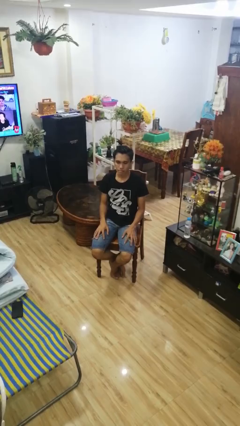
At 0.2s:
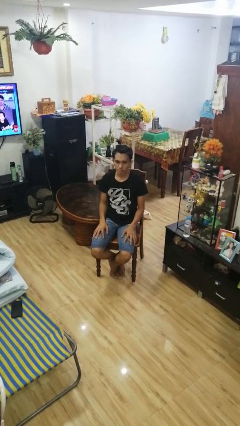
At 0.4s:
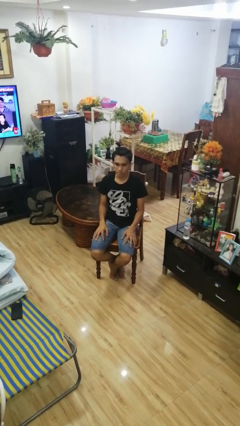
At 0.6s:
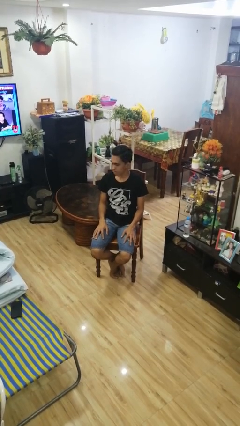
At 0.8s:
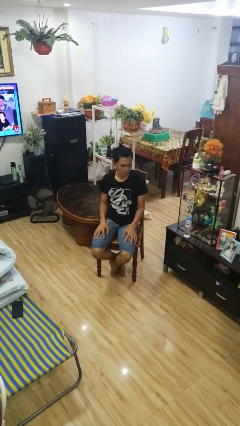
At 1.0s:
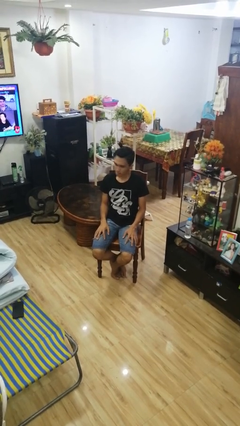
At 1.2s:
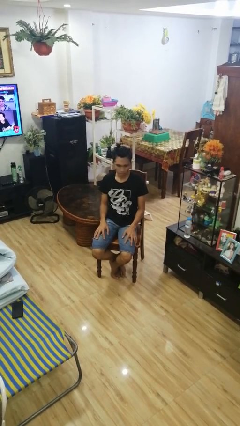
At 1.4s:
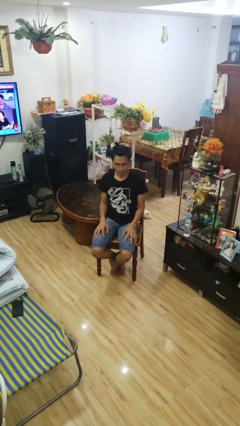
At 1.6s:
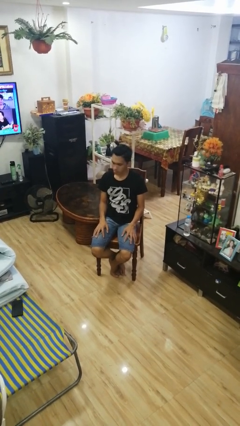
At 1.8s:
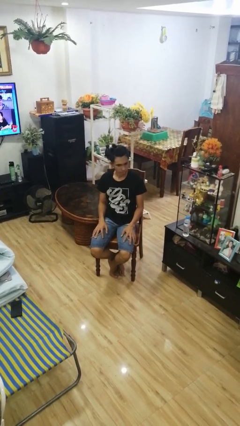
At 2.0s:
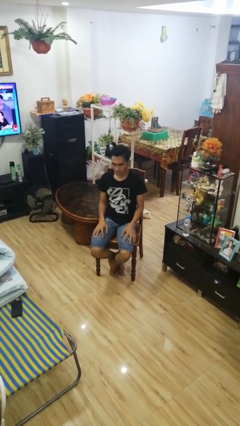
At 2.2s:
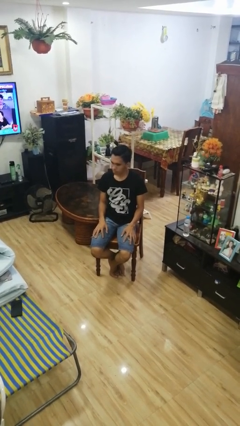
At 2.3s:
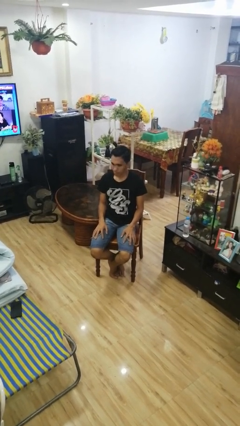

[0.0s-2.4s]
person shakes head

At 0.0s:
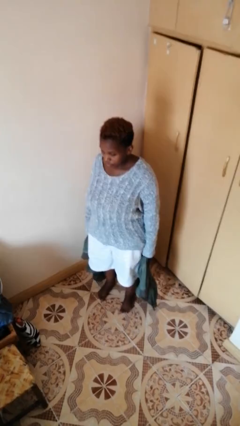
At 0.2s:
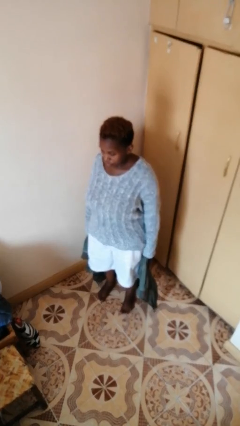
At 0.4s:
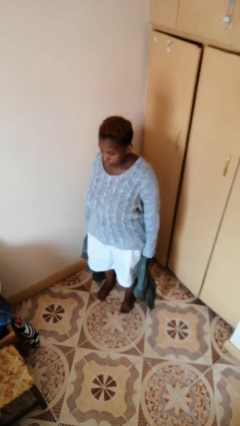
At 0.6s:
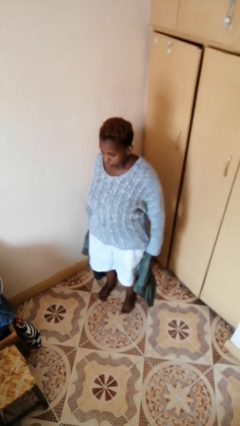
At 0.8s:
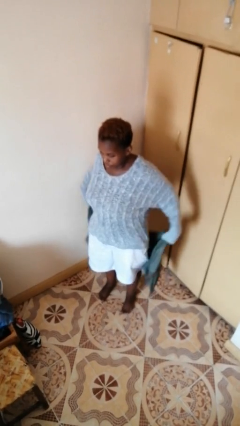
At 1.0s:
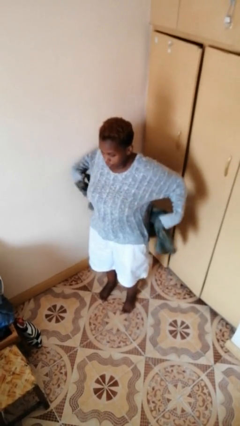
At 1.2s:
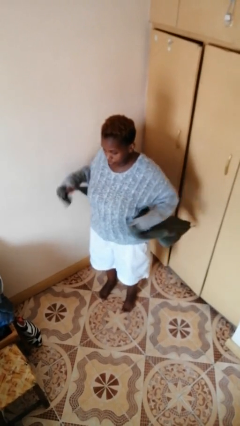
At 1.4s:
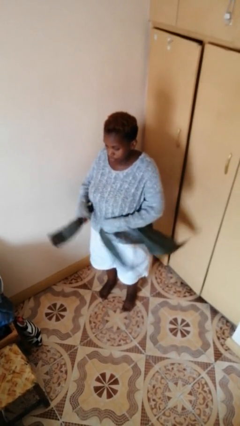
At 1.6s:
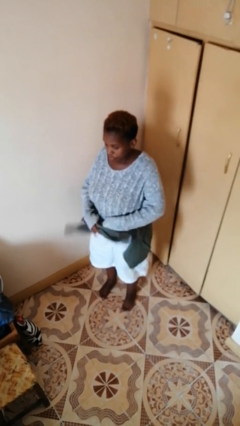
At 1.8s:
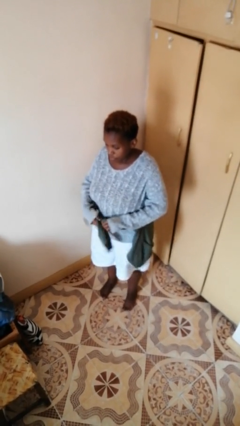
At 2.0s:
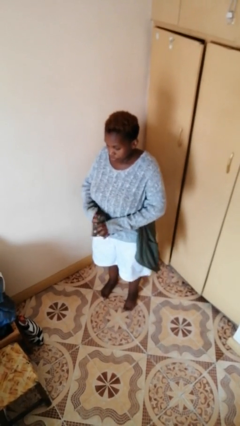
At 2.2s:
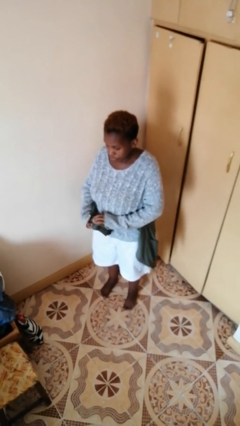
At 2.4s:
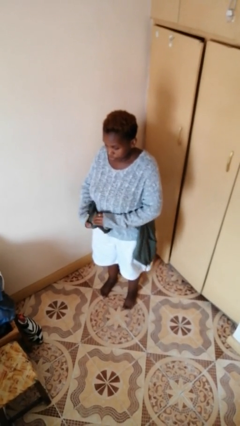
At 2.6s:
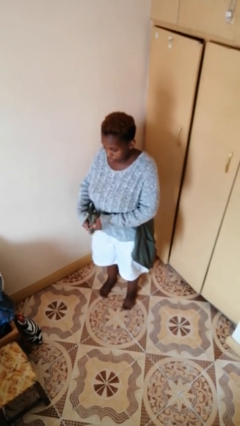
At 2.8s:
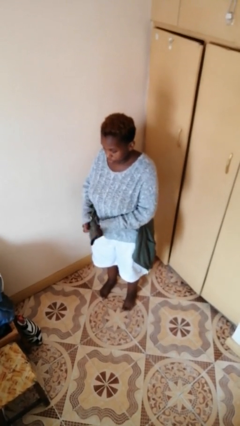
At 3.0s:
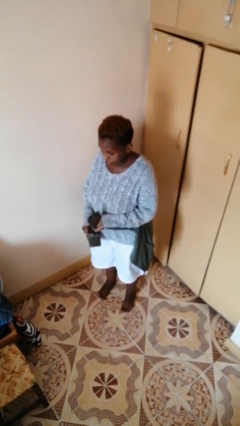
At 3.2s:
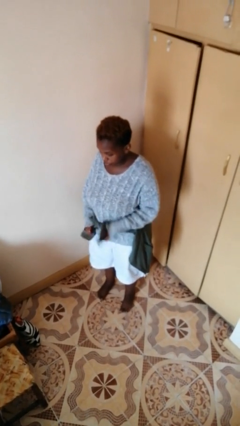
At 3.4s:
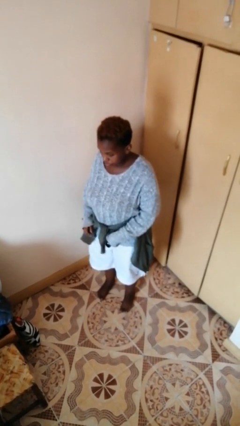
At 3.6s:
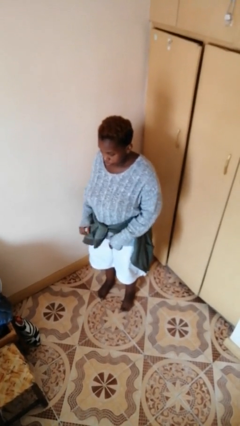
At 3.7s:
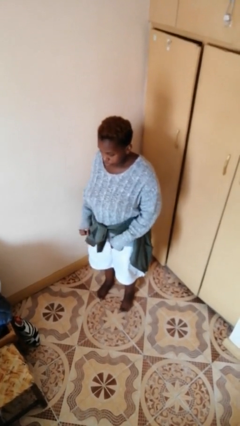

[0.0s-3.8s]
person ties jacket around waist

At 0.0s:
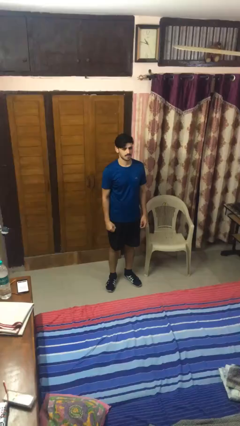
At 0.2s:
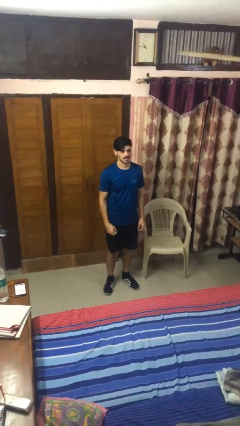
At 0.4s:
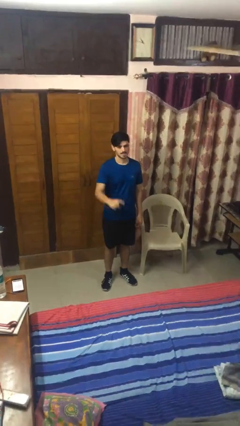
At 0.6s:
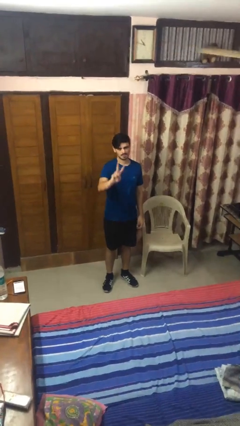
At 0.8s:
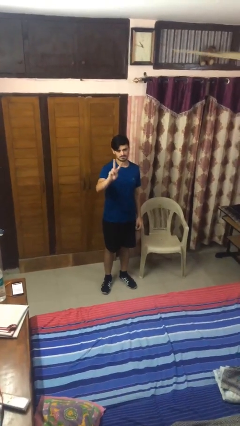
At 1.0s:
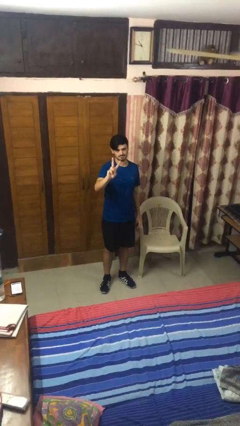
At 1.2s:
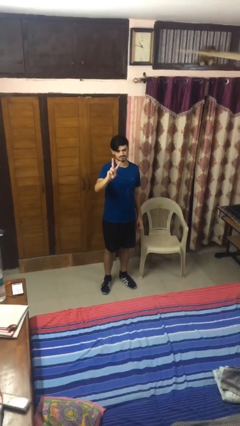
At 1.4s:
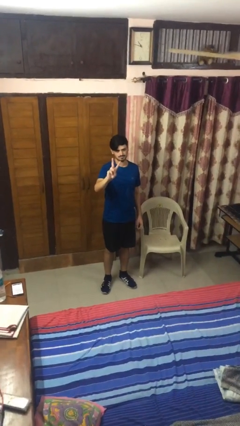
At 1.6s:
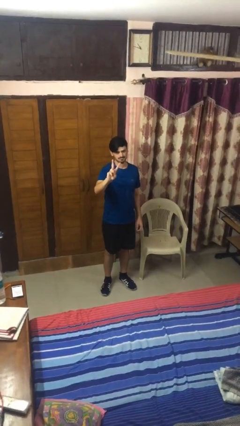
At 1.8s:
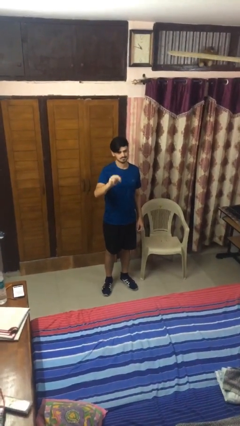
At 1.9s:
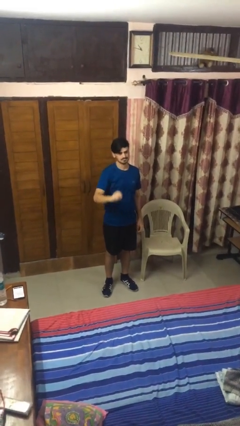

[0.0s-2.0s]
person gestures peace

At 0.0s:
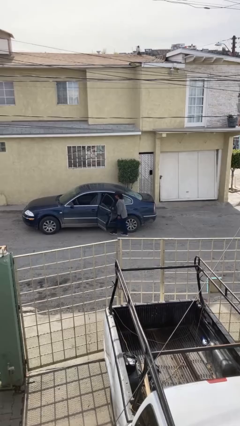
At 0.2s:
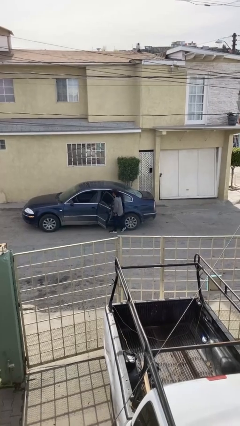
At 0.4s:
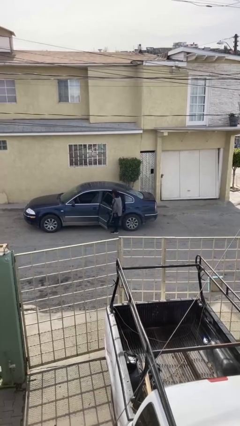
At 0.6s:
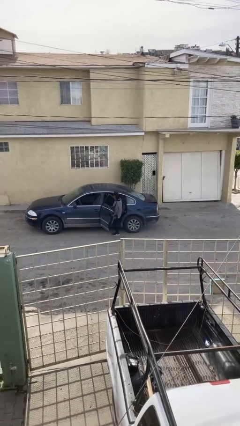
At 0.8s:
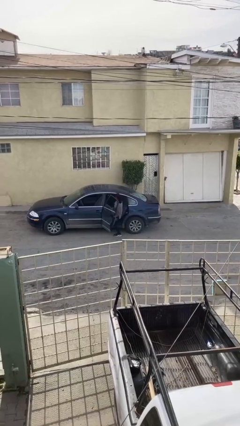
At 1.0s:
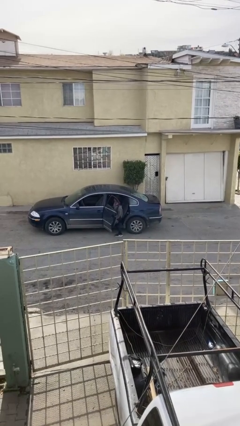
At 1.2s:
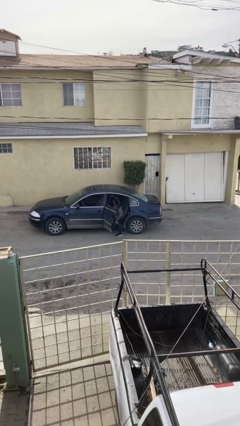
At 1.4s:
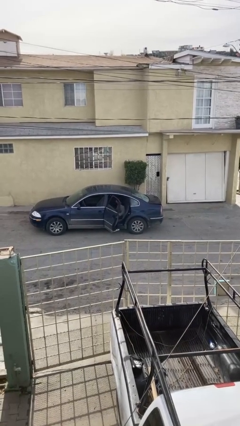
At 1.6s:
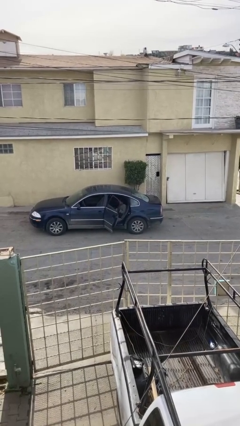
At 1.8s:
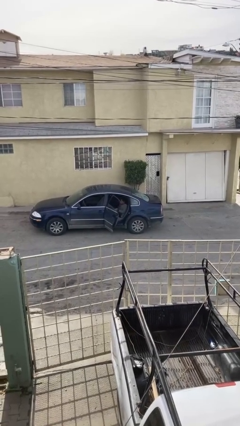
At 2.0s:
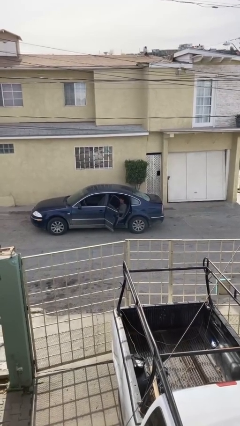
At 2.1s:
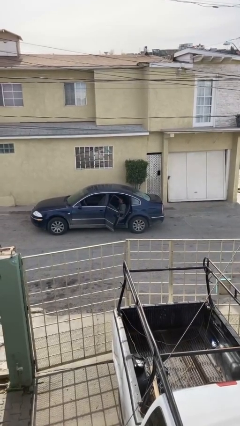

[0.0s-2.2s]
person enters car

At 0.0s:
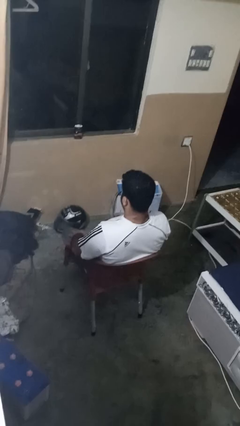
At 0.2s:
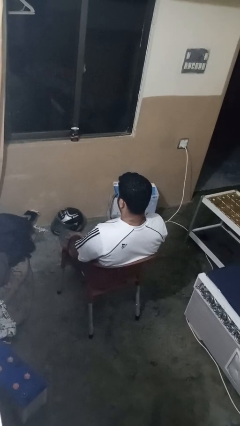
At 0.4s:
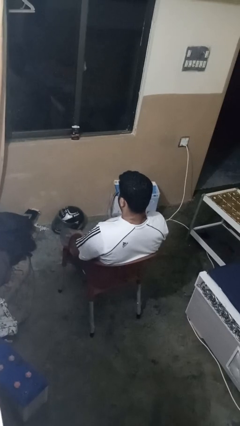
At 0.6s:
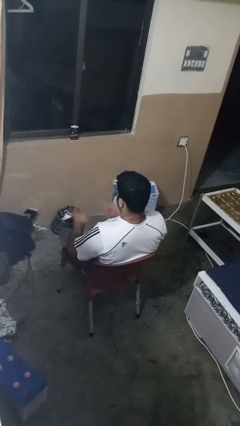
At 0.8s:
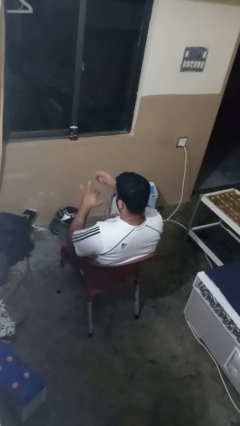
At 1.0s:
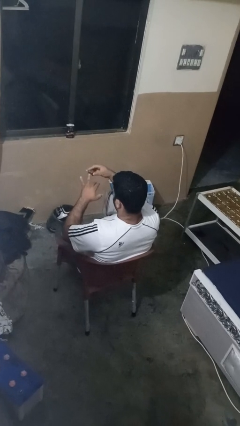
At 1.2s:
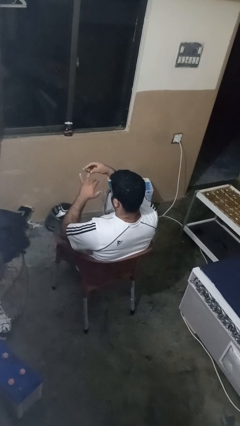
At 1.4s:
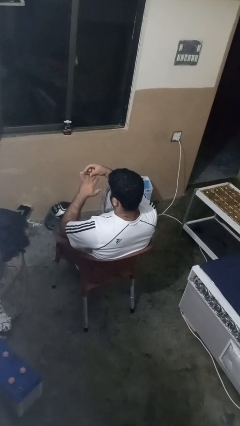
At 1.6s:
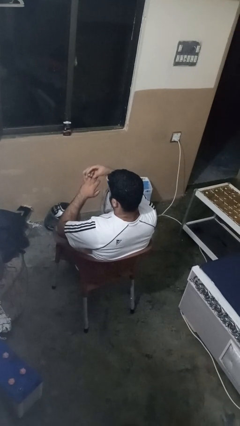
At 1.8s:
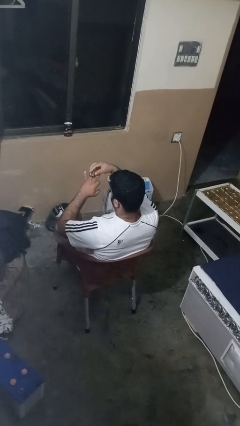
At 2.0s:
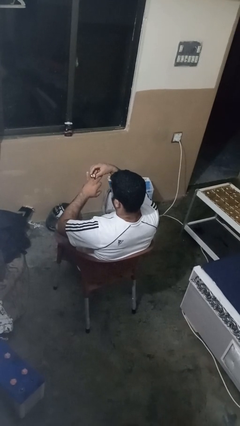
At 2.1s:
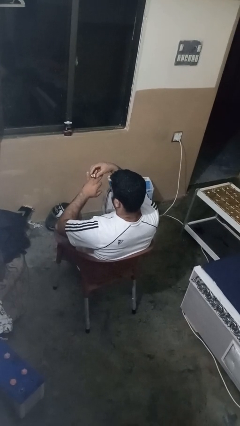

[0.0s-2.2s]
person puts on ring

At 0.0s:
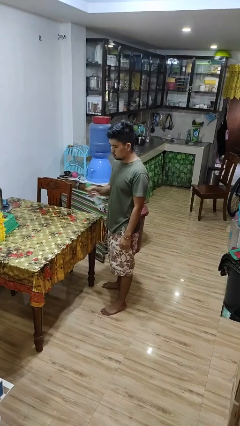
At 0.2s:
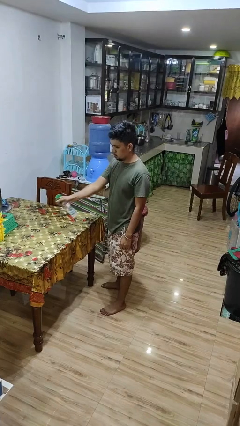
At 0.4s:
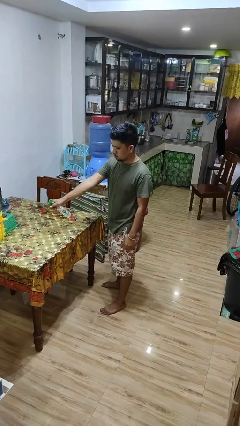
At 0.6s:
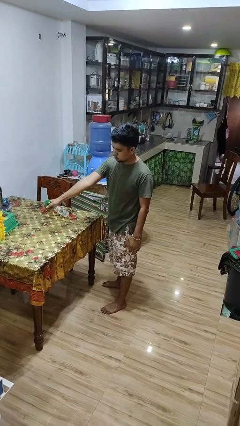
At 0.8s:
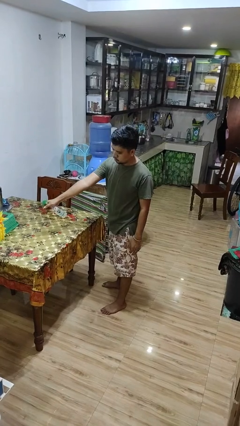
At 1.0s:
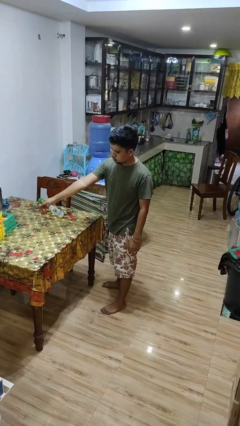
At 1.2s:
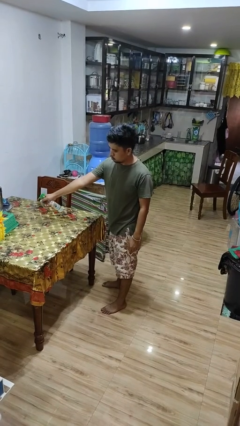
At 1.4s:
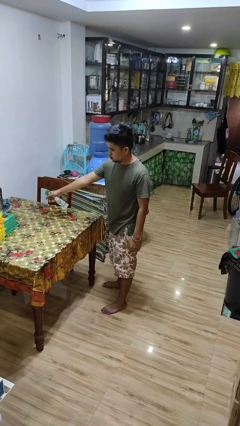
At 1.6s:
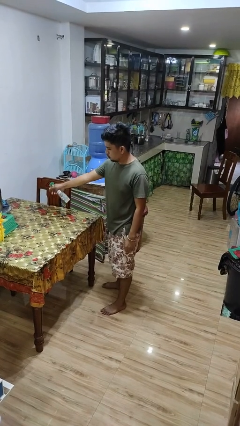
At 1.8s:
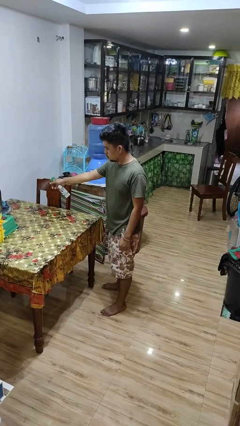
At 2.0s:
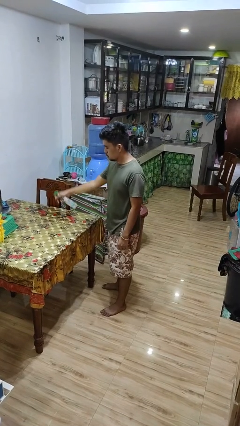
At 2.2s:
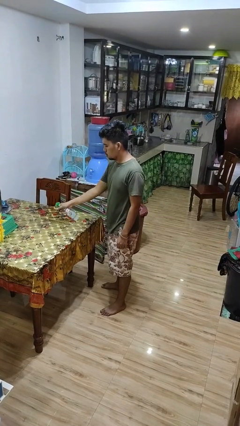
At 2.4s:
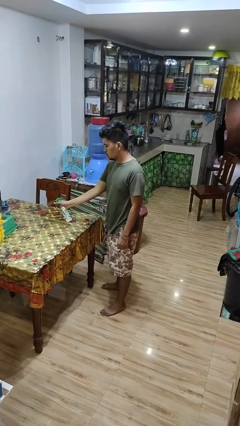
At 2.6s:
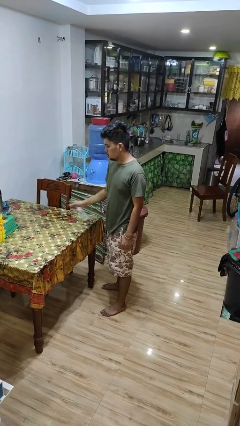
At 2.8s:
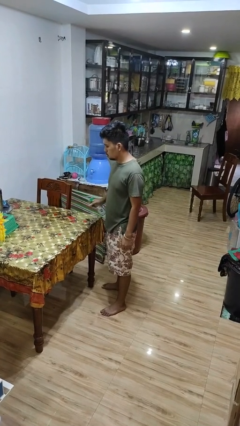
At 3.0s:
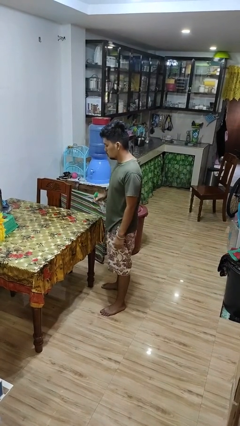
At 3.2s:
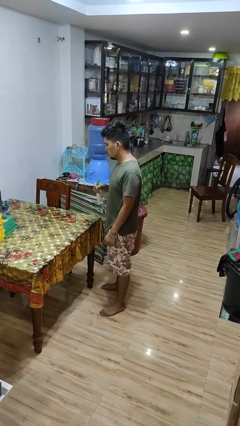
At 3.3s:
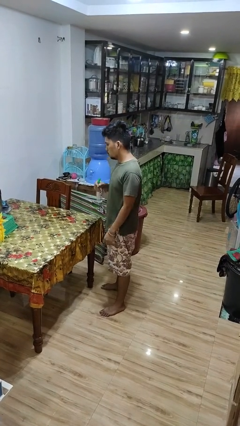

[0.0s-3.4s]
person sprays from bottle

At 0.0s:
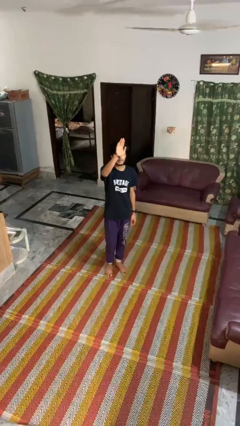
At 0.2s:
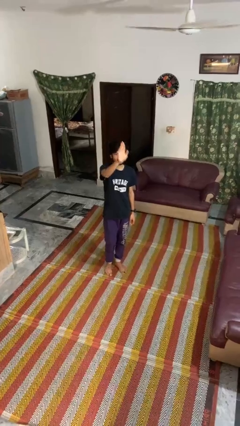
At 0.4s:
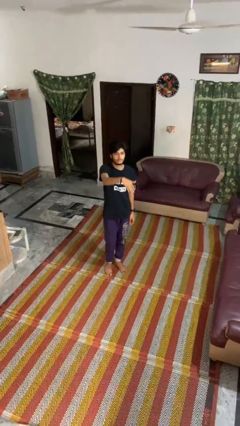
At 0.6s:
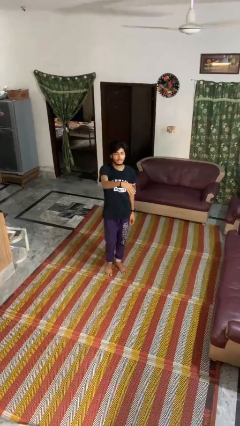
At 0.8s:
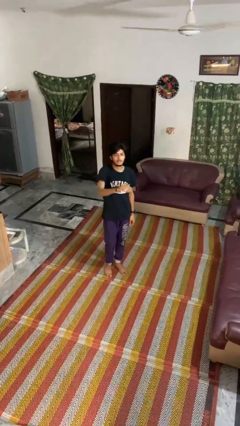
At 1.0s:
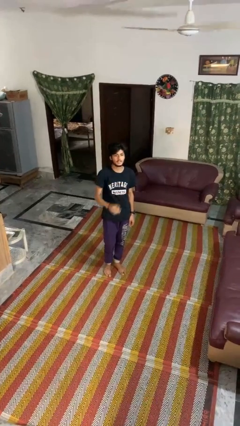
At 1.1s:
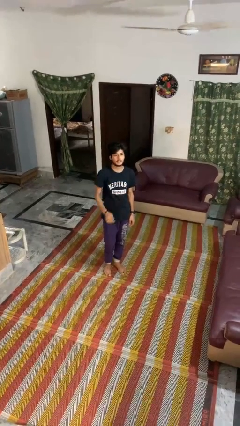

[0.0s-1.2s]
person gestures swipe down
